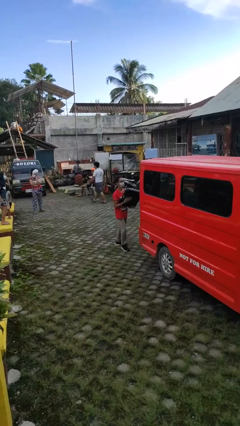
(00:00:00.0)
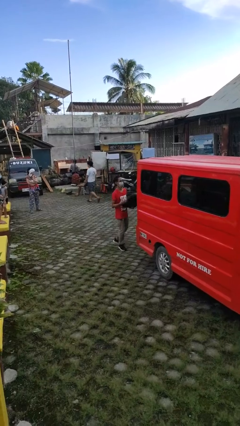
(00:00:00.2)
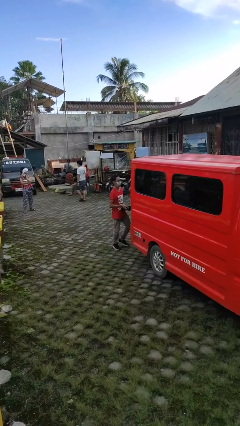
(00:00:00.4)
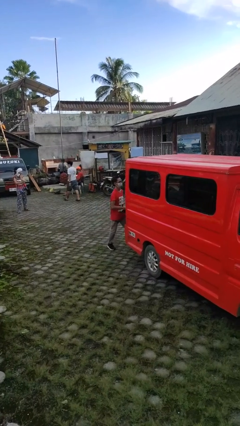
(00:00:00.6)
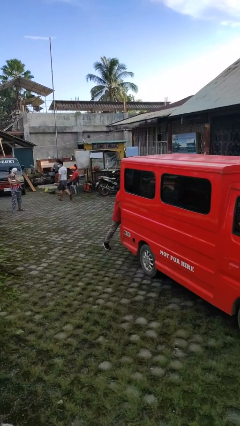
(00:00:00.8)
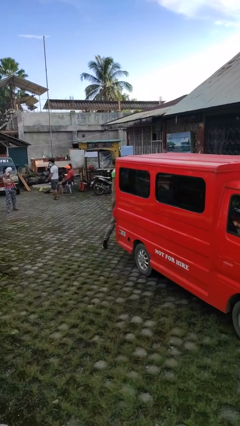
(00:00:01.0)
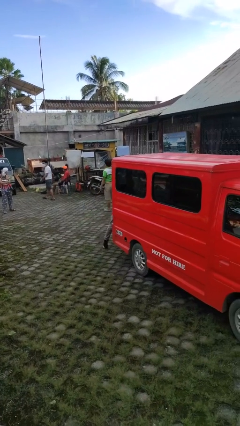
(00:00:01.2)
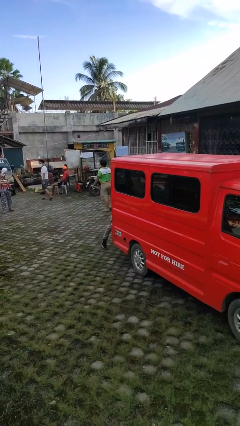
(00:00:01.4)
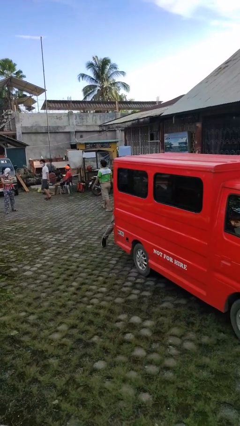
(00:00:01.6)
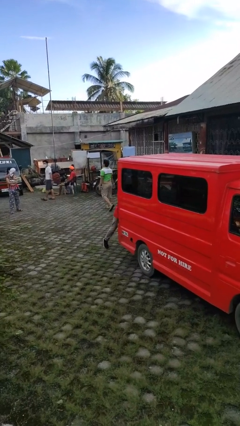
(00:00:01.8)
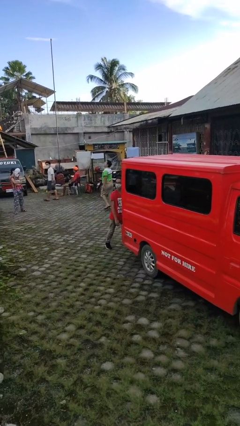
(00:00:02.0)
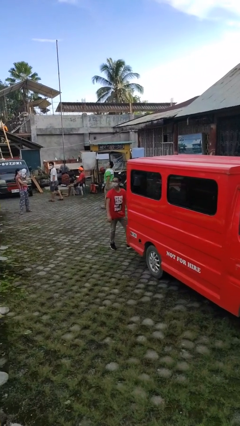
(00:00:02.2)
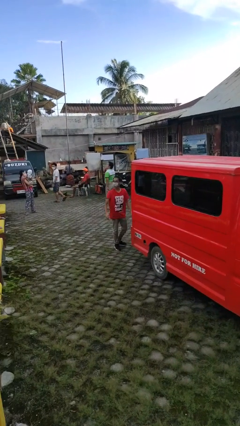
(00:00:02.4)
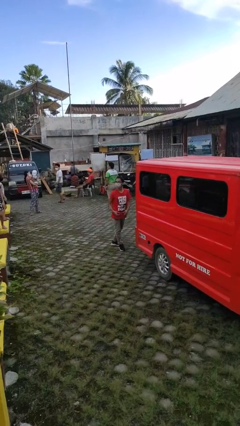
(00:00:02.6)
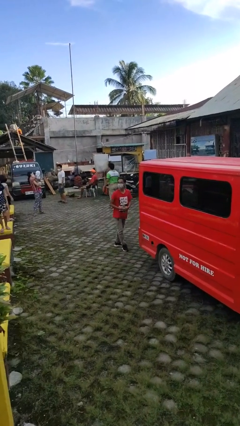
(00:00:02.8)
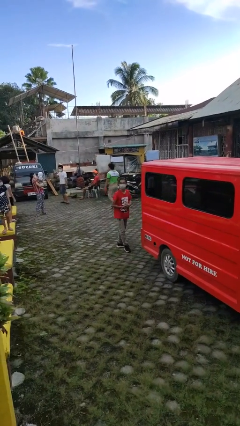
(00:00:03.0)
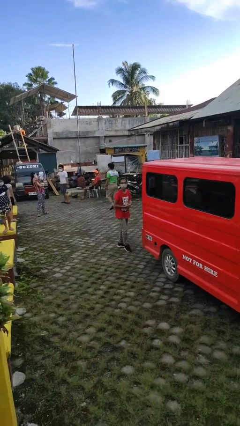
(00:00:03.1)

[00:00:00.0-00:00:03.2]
person loads car

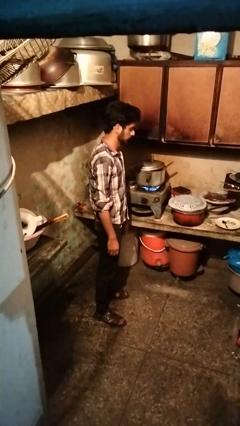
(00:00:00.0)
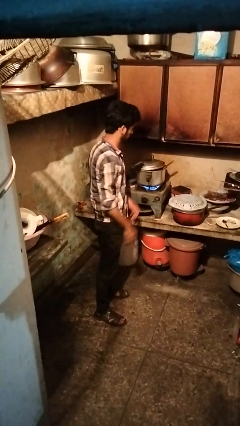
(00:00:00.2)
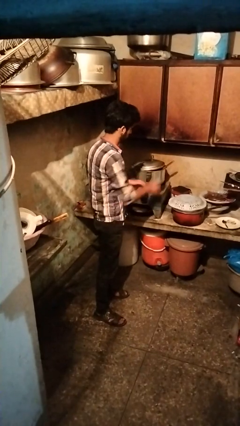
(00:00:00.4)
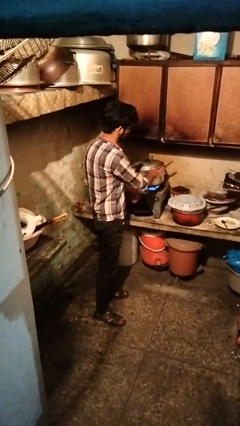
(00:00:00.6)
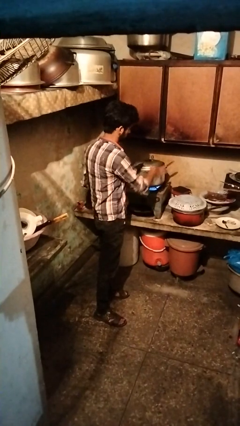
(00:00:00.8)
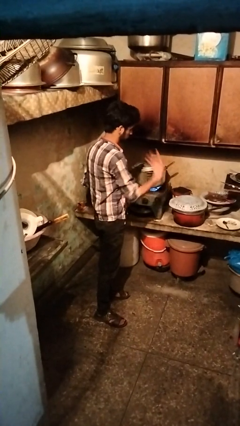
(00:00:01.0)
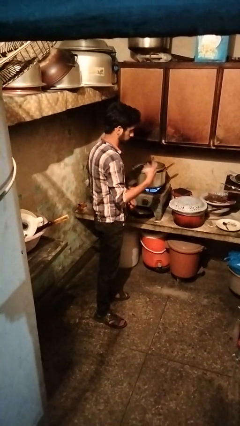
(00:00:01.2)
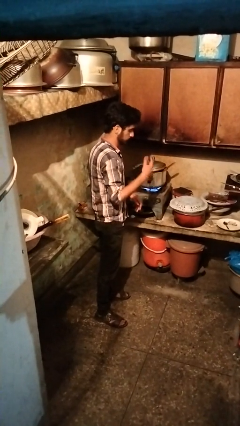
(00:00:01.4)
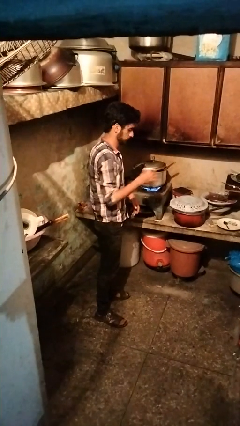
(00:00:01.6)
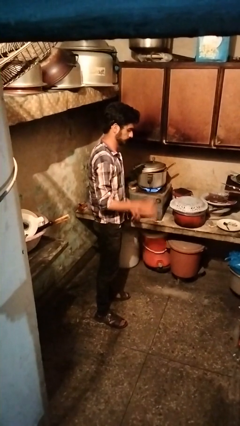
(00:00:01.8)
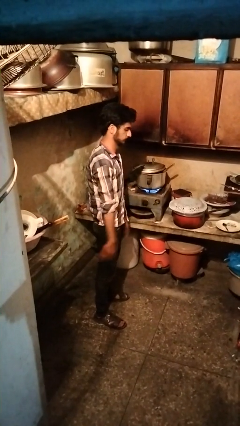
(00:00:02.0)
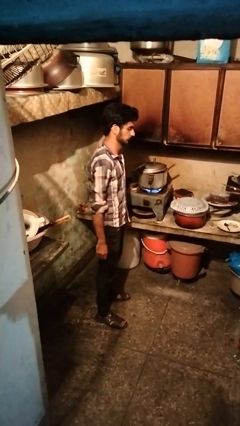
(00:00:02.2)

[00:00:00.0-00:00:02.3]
person burns hand

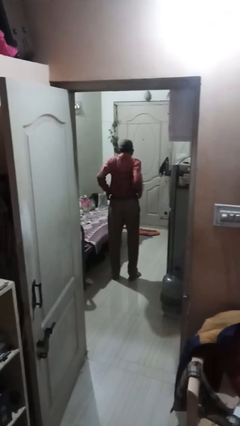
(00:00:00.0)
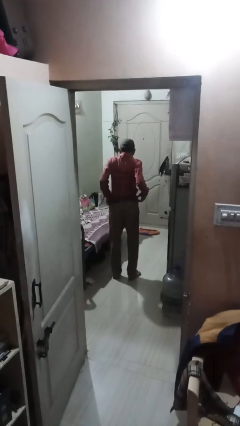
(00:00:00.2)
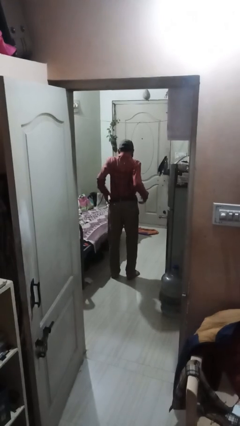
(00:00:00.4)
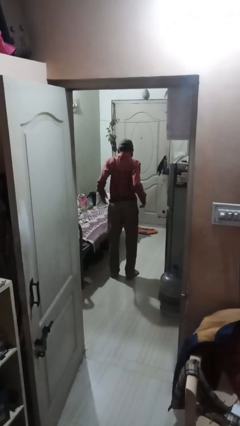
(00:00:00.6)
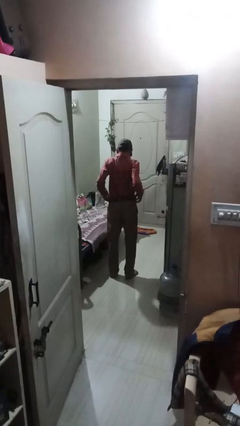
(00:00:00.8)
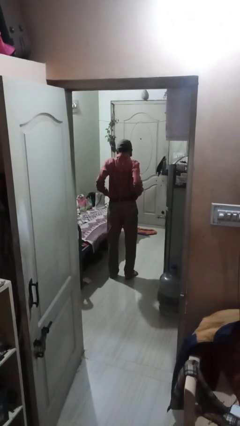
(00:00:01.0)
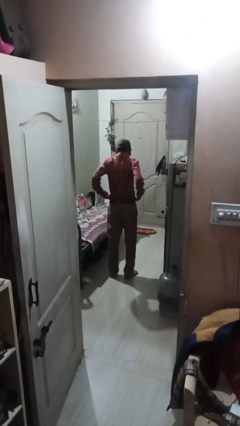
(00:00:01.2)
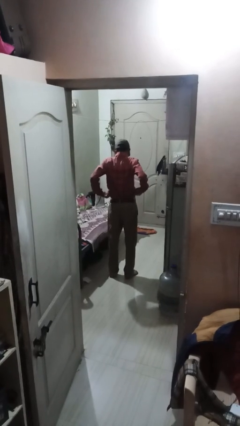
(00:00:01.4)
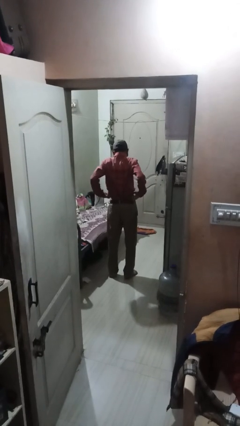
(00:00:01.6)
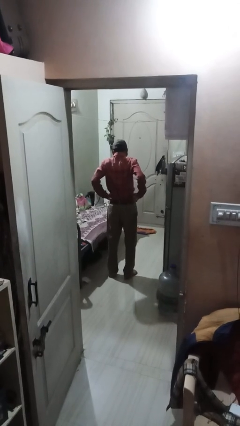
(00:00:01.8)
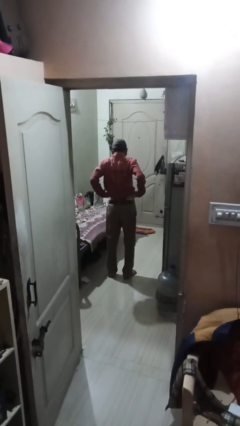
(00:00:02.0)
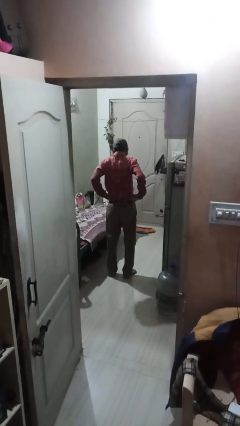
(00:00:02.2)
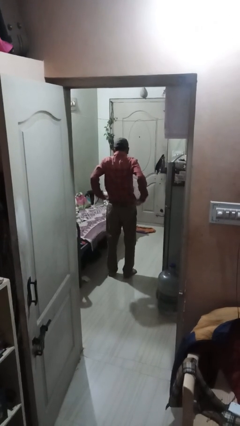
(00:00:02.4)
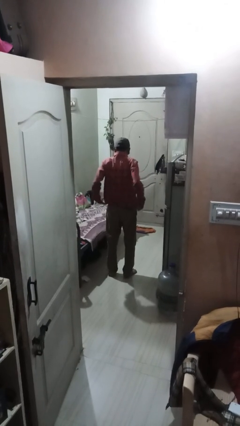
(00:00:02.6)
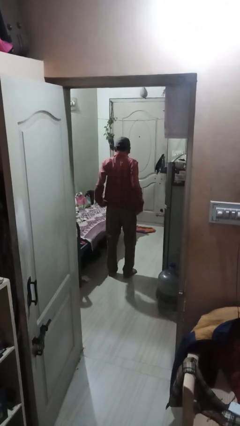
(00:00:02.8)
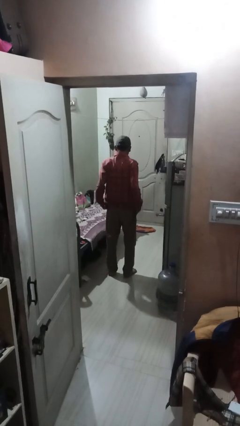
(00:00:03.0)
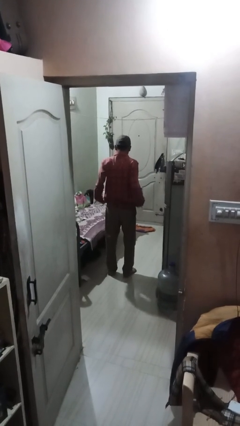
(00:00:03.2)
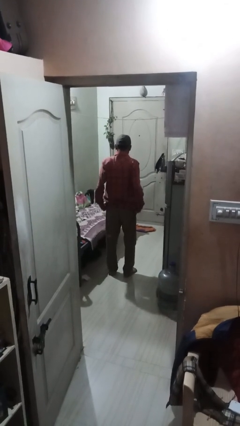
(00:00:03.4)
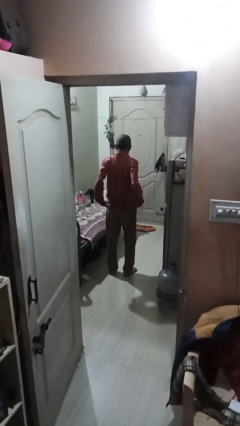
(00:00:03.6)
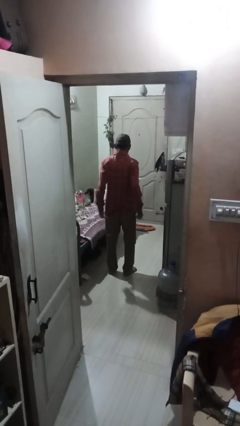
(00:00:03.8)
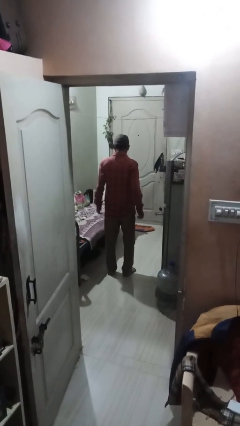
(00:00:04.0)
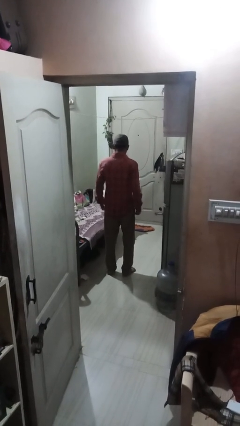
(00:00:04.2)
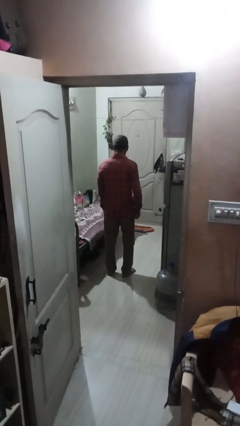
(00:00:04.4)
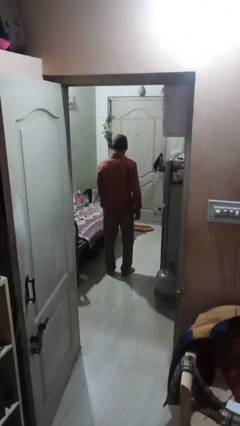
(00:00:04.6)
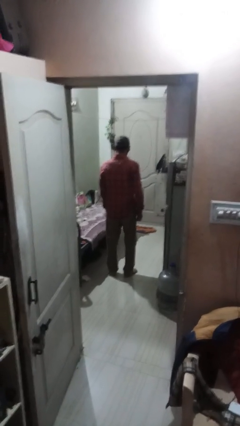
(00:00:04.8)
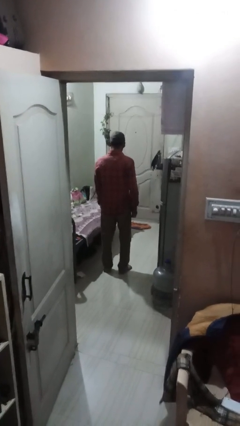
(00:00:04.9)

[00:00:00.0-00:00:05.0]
person untucks shirt

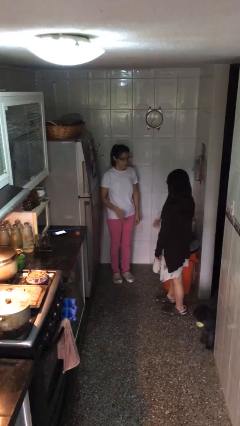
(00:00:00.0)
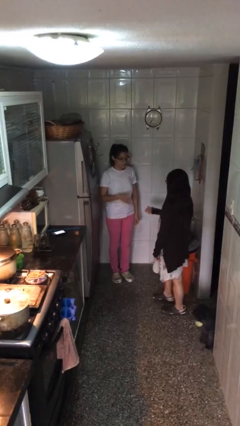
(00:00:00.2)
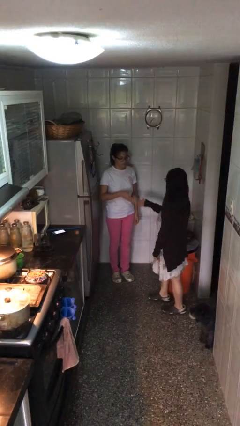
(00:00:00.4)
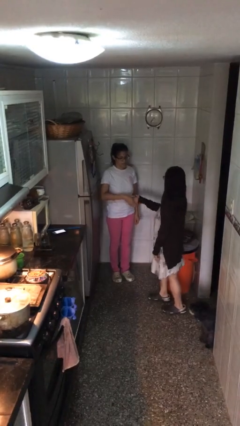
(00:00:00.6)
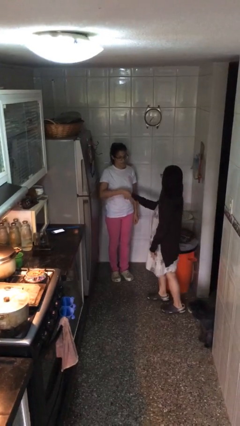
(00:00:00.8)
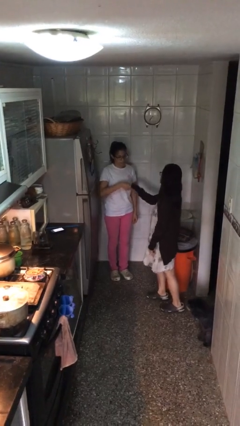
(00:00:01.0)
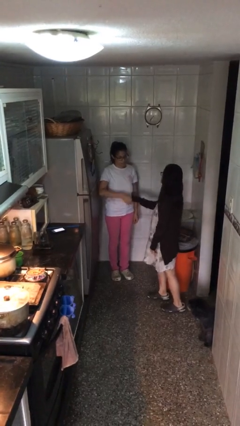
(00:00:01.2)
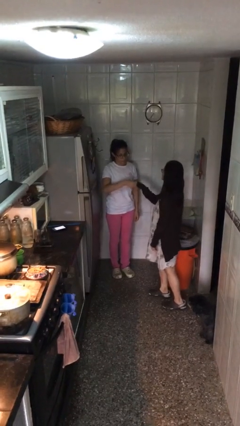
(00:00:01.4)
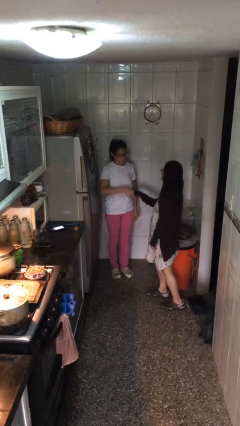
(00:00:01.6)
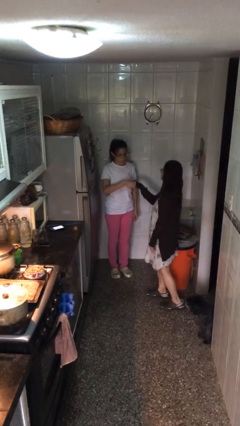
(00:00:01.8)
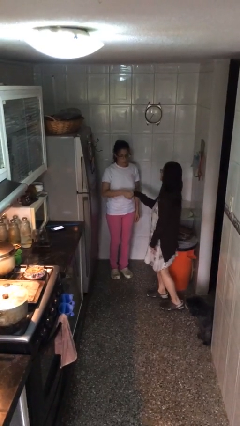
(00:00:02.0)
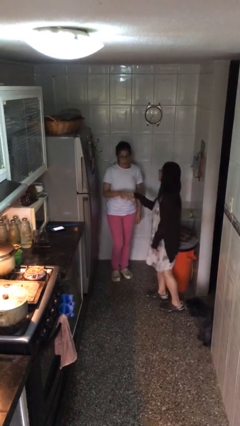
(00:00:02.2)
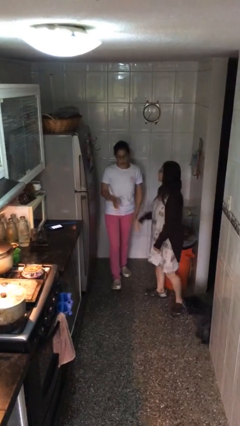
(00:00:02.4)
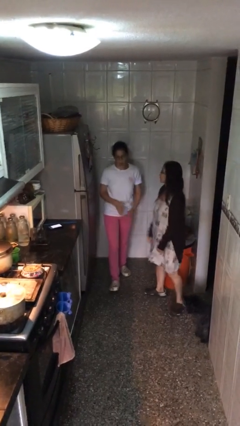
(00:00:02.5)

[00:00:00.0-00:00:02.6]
person shakes hand

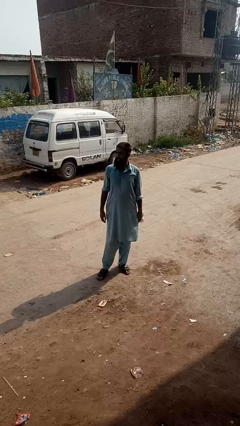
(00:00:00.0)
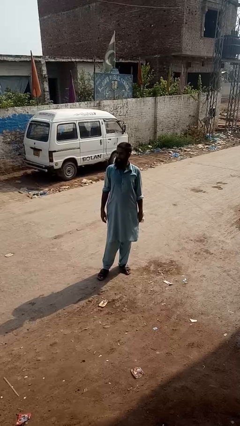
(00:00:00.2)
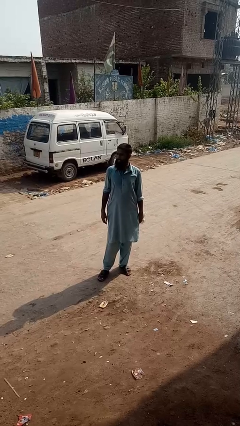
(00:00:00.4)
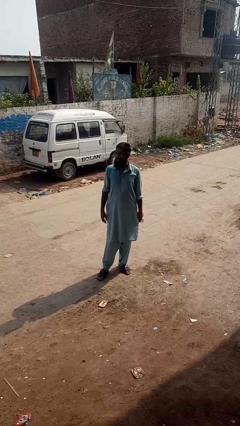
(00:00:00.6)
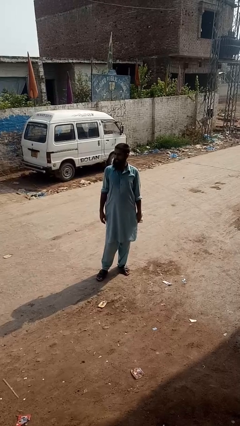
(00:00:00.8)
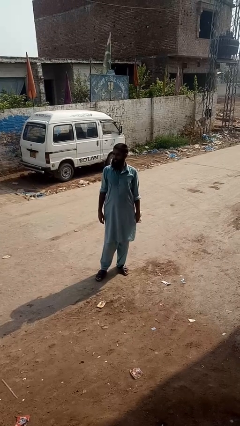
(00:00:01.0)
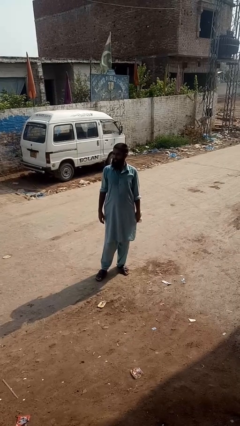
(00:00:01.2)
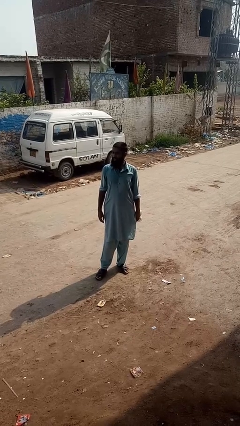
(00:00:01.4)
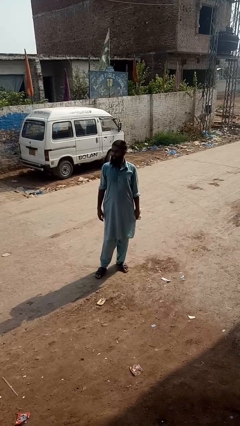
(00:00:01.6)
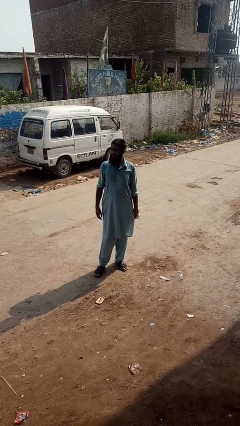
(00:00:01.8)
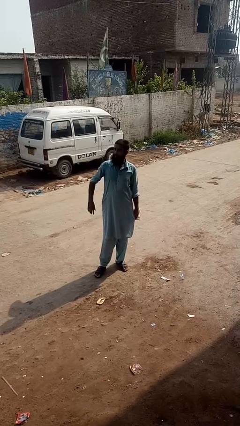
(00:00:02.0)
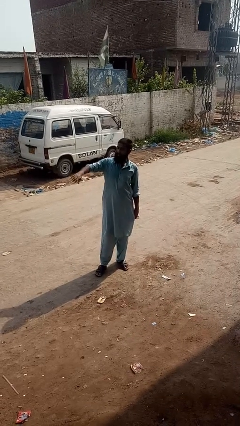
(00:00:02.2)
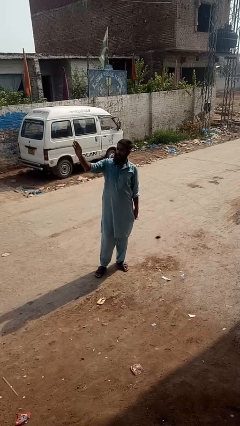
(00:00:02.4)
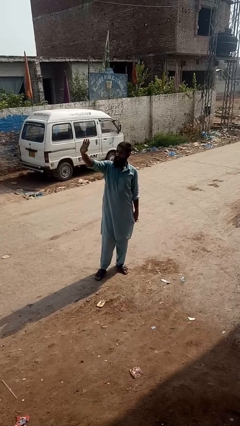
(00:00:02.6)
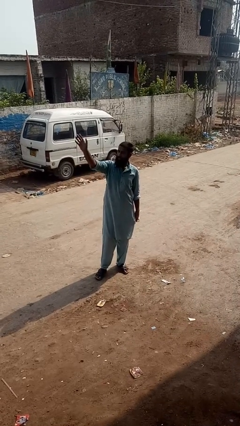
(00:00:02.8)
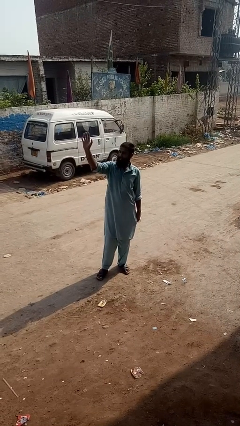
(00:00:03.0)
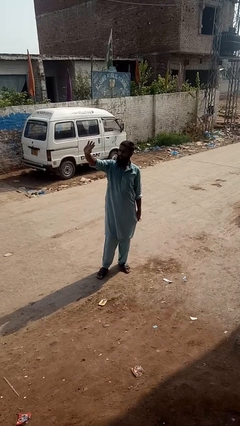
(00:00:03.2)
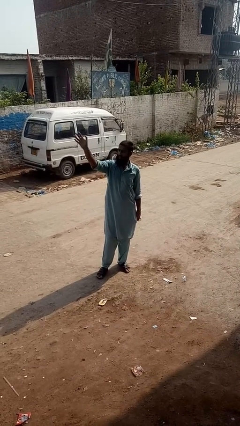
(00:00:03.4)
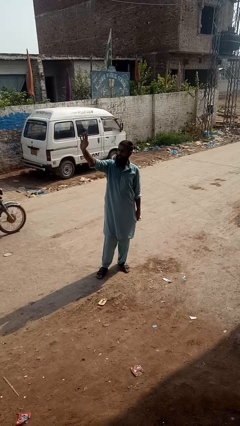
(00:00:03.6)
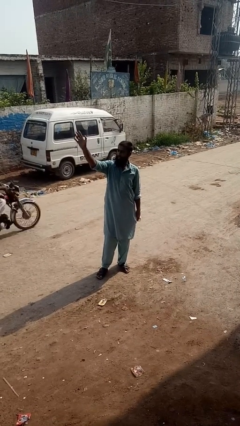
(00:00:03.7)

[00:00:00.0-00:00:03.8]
person waves at person

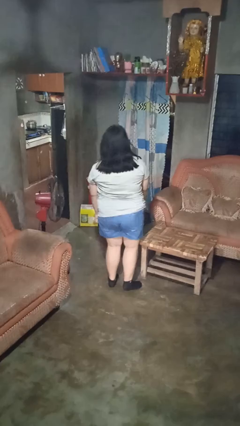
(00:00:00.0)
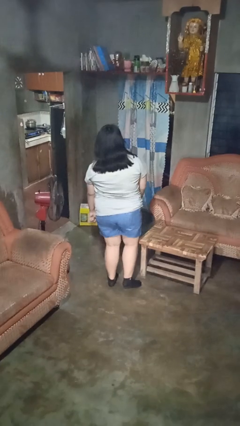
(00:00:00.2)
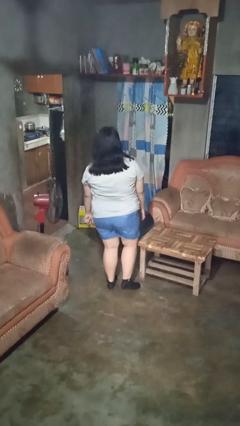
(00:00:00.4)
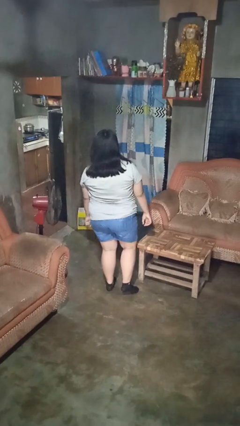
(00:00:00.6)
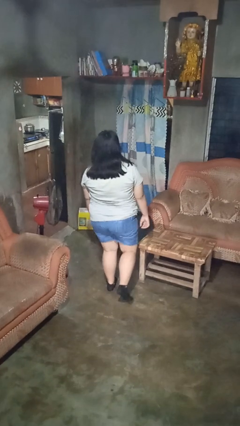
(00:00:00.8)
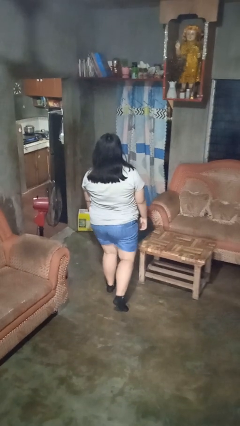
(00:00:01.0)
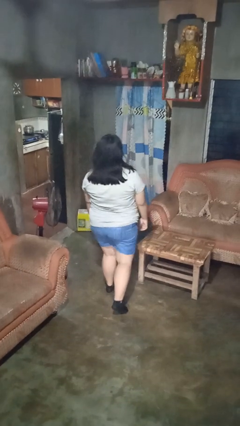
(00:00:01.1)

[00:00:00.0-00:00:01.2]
person bumps into table
